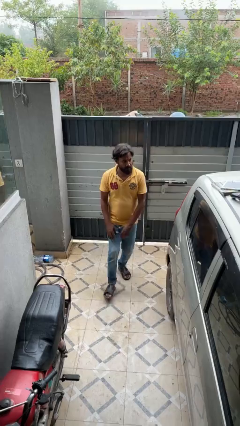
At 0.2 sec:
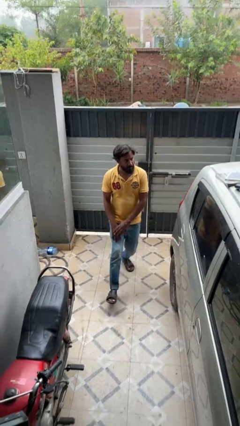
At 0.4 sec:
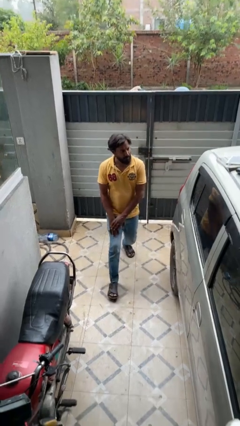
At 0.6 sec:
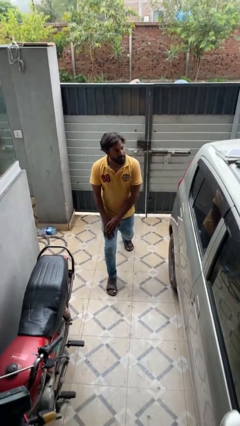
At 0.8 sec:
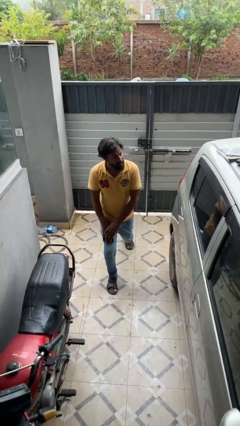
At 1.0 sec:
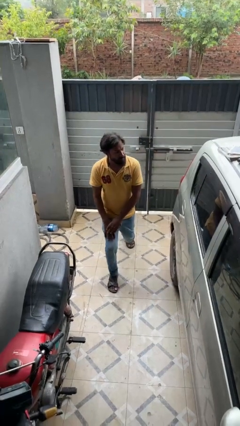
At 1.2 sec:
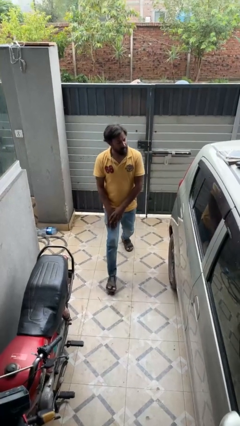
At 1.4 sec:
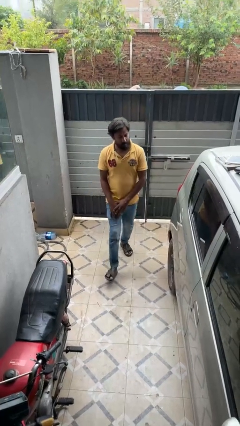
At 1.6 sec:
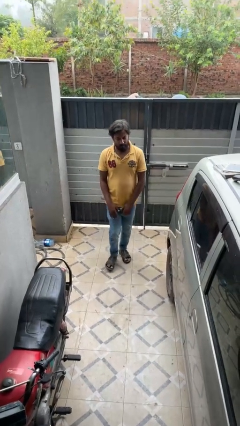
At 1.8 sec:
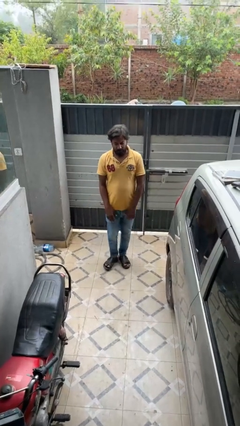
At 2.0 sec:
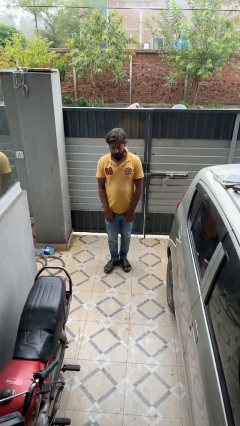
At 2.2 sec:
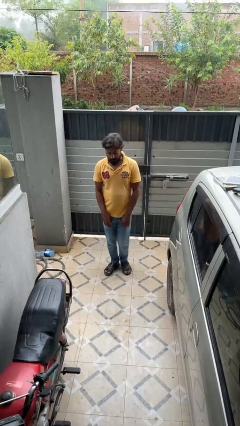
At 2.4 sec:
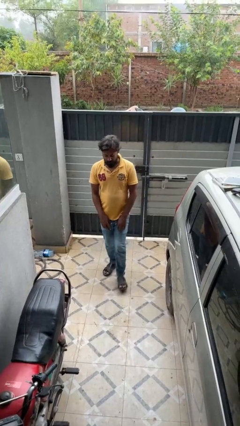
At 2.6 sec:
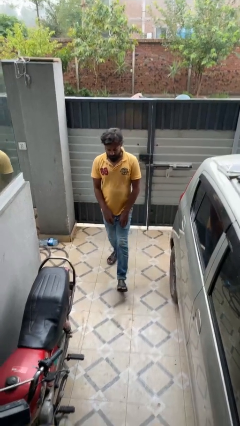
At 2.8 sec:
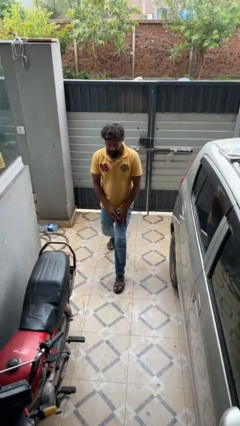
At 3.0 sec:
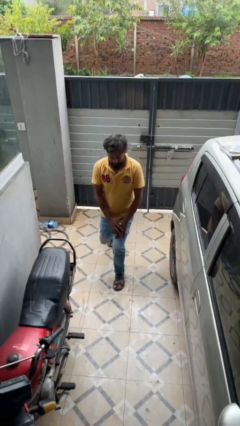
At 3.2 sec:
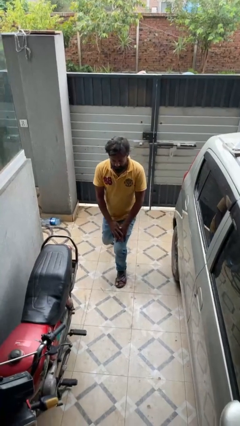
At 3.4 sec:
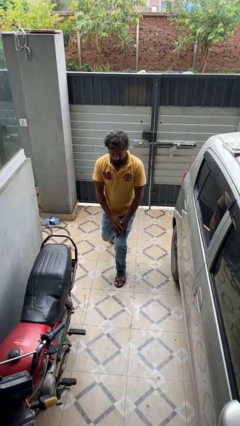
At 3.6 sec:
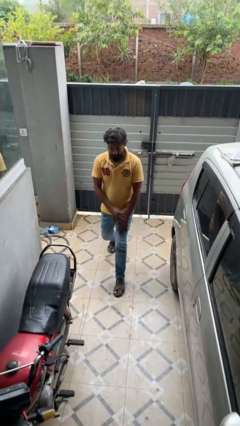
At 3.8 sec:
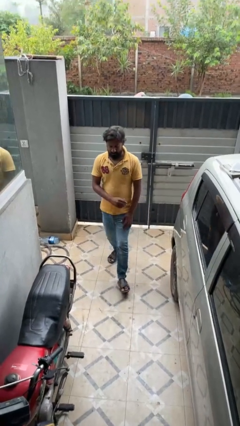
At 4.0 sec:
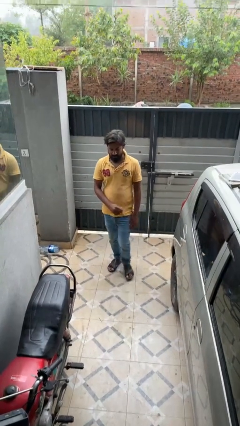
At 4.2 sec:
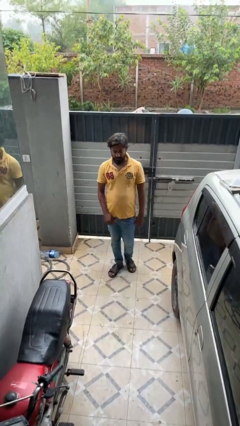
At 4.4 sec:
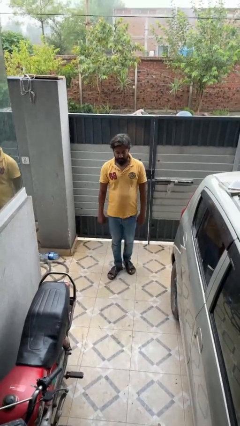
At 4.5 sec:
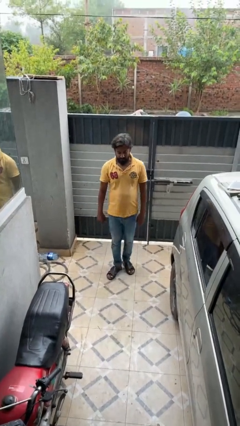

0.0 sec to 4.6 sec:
person exercises with lunges

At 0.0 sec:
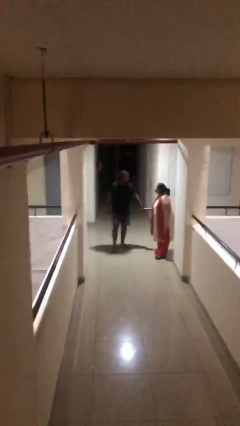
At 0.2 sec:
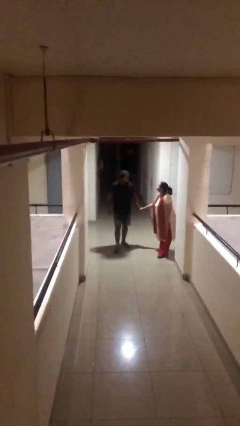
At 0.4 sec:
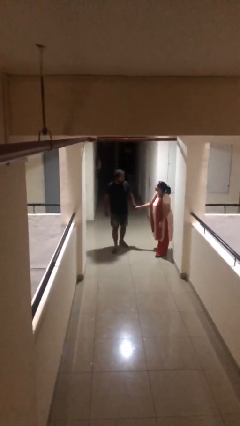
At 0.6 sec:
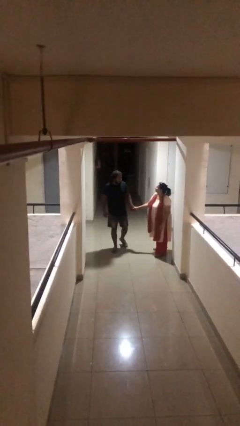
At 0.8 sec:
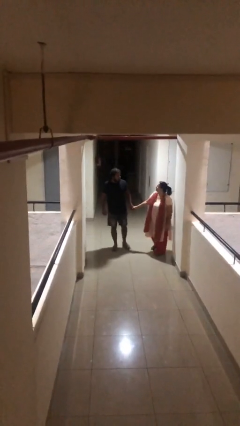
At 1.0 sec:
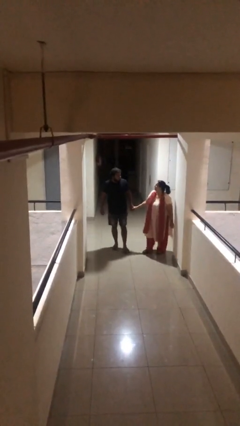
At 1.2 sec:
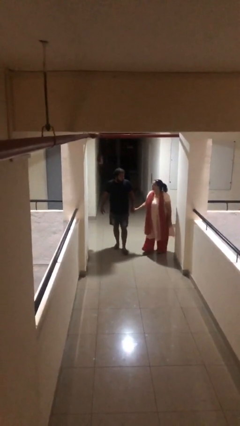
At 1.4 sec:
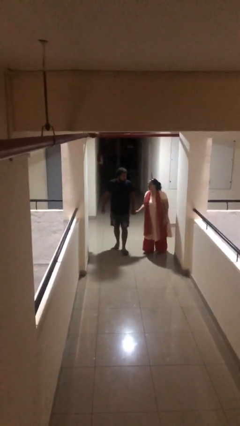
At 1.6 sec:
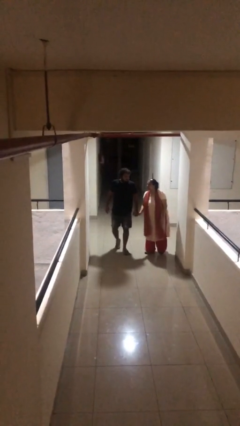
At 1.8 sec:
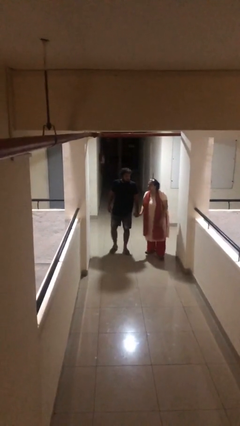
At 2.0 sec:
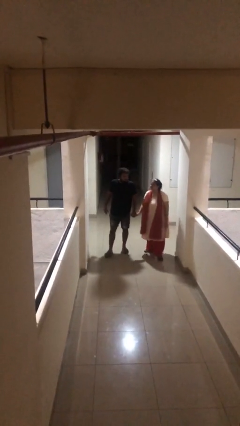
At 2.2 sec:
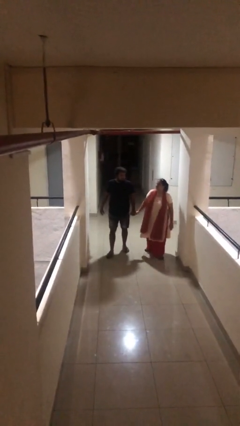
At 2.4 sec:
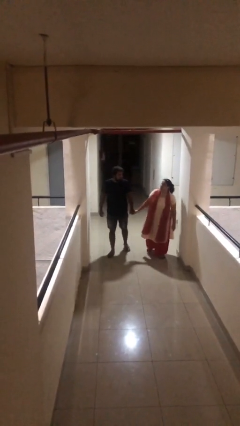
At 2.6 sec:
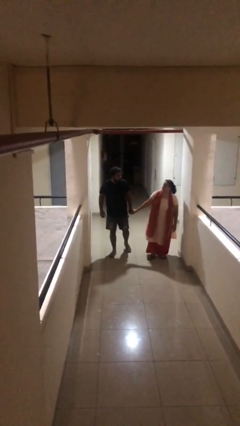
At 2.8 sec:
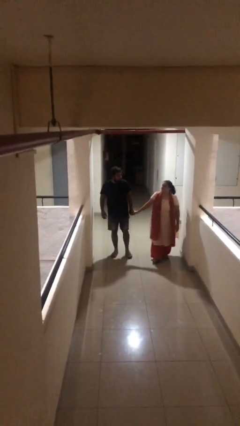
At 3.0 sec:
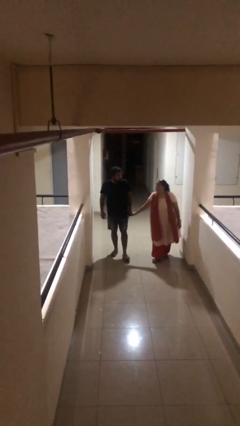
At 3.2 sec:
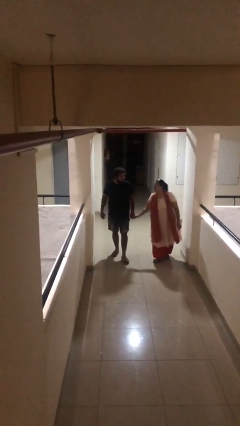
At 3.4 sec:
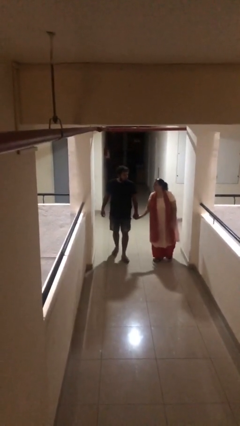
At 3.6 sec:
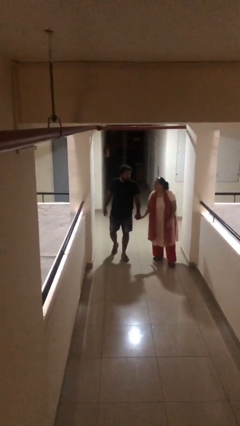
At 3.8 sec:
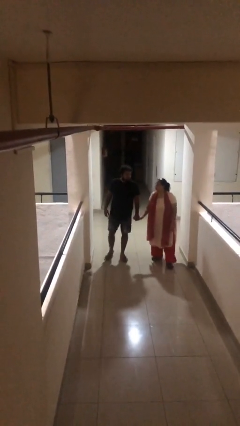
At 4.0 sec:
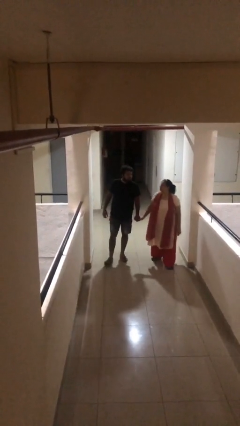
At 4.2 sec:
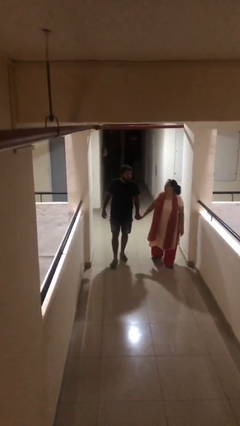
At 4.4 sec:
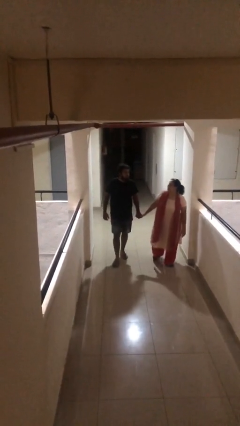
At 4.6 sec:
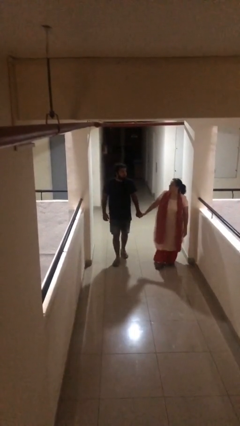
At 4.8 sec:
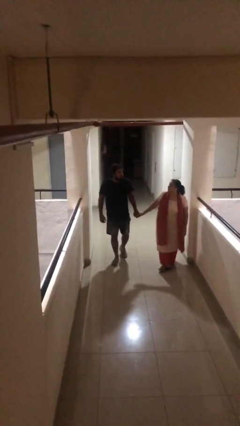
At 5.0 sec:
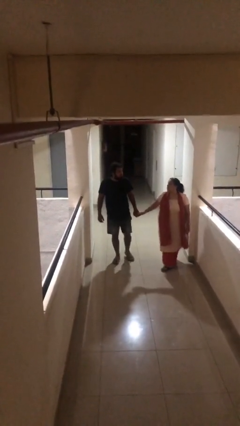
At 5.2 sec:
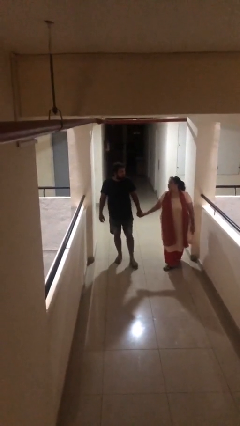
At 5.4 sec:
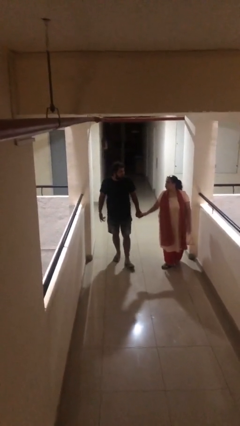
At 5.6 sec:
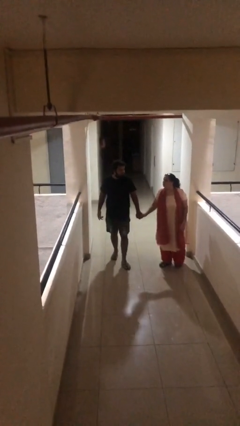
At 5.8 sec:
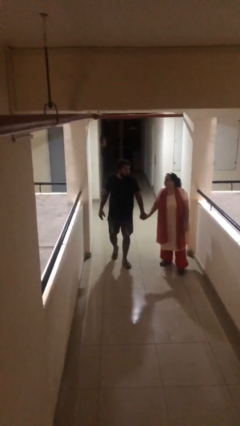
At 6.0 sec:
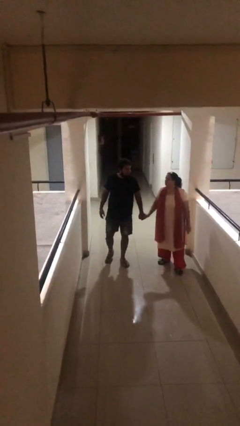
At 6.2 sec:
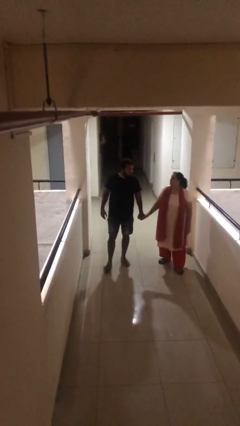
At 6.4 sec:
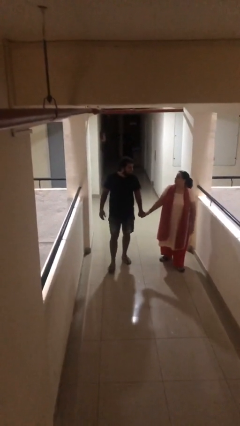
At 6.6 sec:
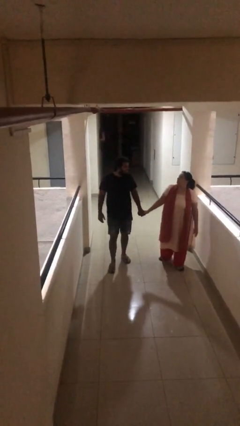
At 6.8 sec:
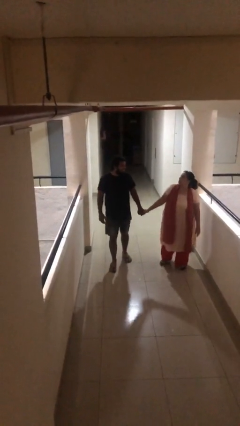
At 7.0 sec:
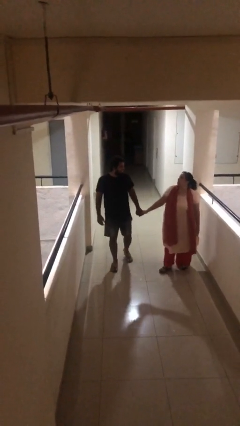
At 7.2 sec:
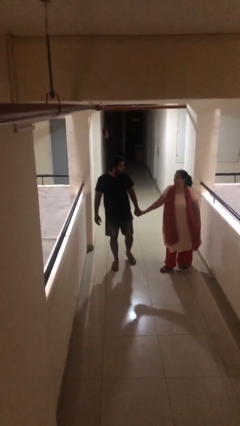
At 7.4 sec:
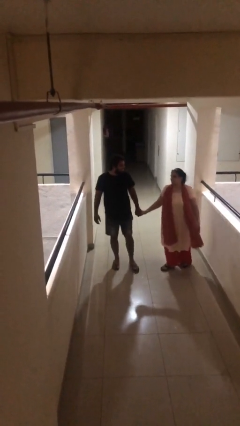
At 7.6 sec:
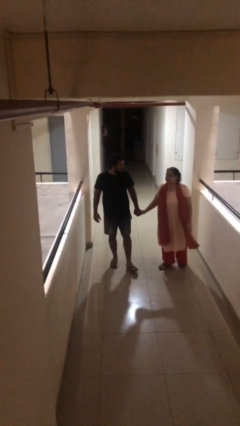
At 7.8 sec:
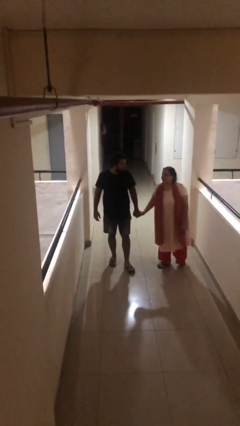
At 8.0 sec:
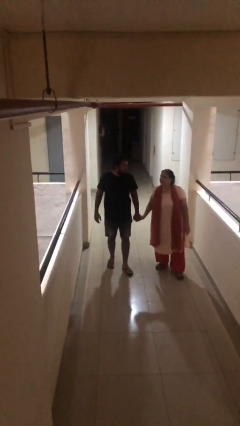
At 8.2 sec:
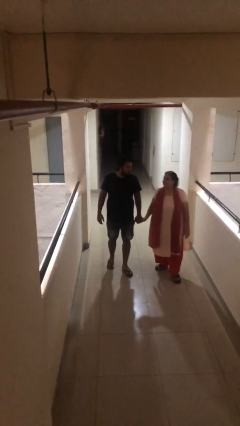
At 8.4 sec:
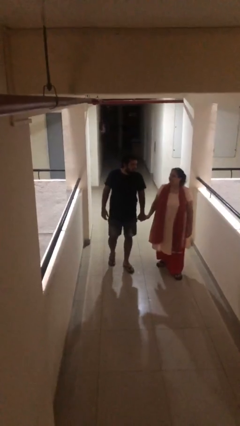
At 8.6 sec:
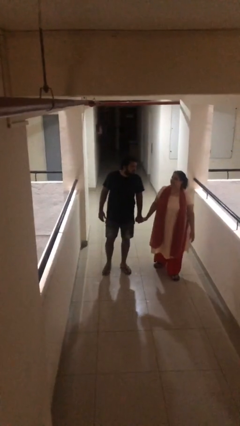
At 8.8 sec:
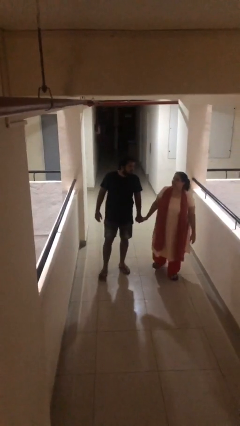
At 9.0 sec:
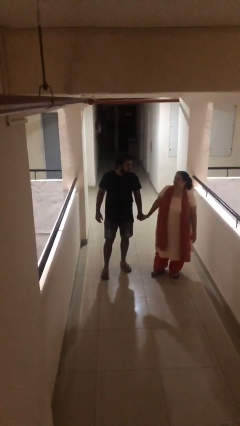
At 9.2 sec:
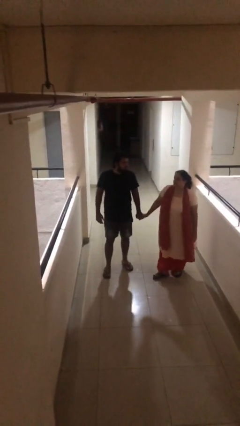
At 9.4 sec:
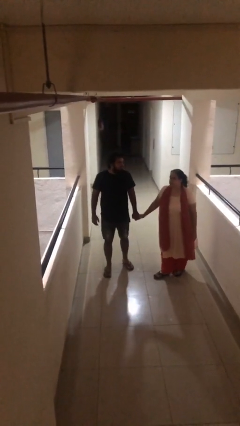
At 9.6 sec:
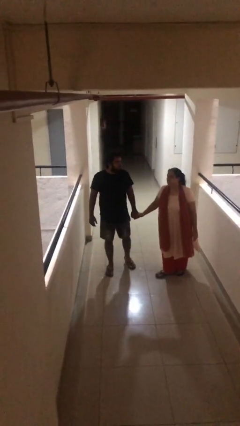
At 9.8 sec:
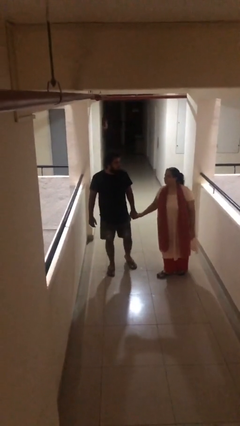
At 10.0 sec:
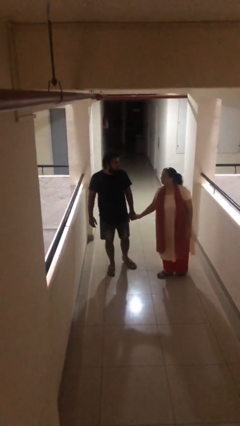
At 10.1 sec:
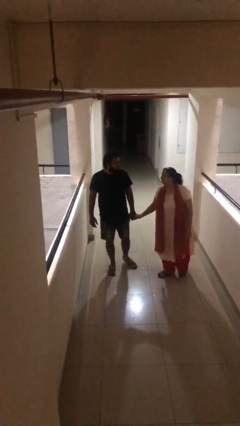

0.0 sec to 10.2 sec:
person holds hand

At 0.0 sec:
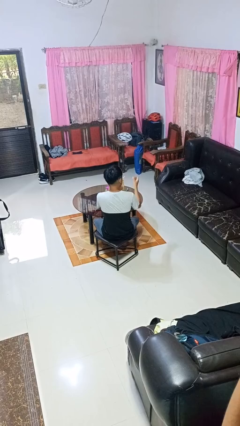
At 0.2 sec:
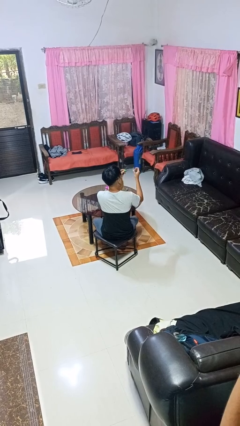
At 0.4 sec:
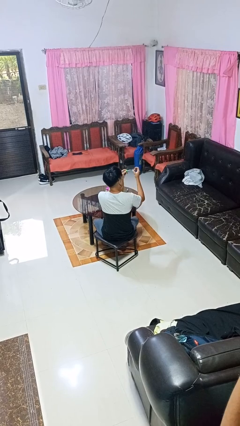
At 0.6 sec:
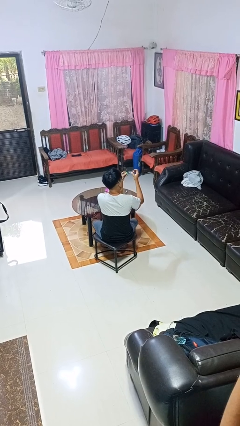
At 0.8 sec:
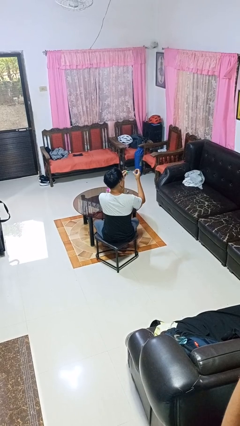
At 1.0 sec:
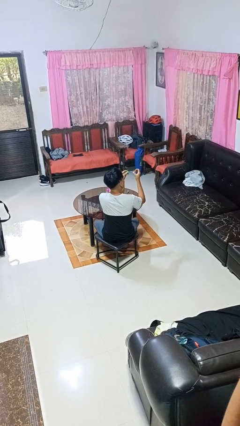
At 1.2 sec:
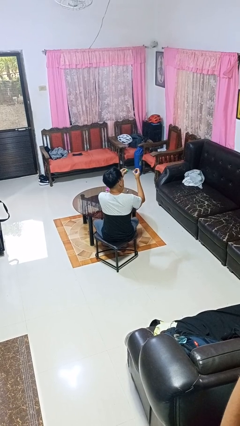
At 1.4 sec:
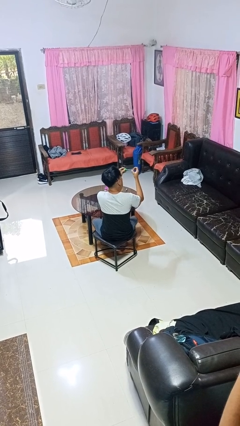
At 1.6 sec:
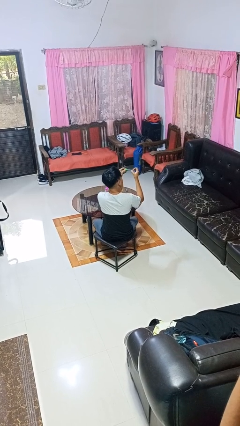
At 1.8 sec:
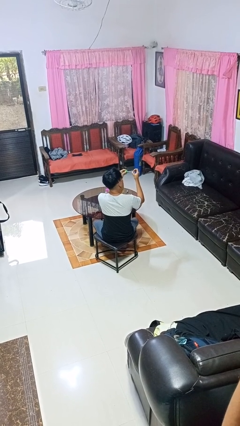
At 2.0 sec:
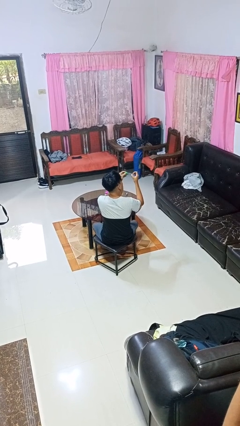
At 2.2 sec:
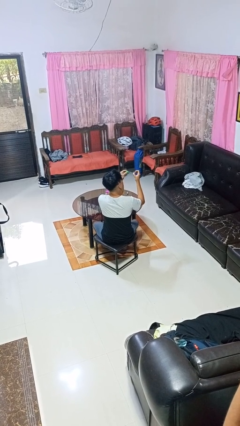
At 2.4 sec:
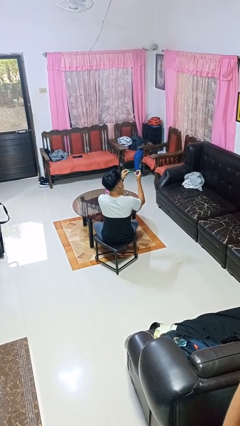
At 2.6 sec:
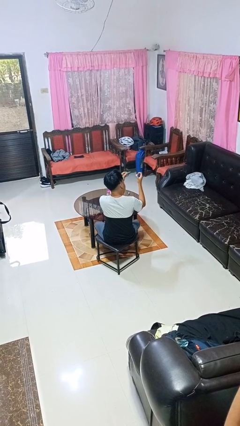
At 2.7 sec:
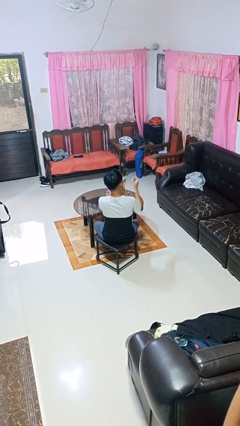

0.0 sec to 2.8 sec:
person paints fingernails
